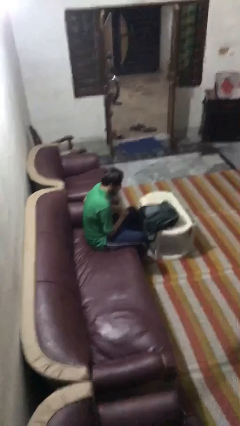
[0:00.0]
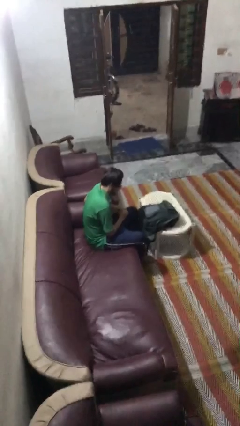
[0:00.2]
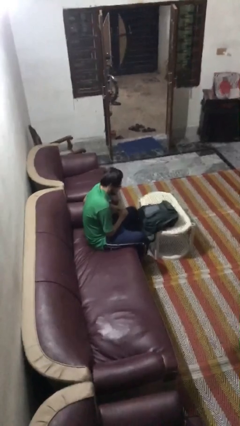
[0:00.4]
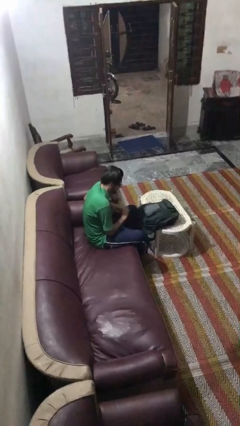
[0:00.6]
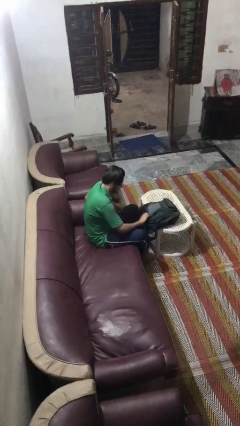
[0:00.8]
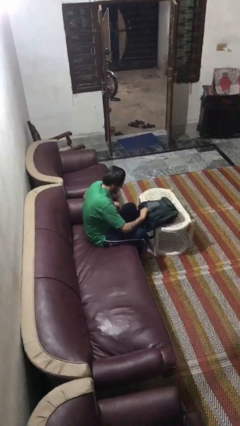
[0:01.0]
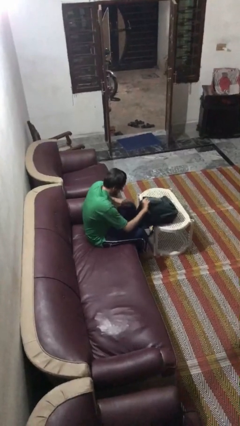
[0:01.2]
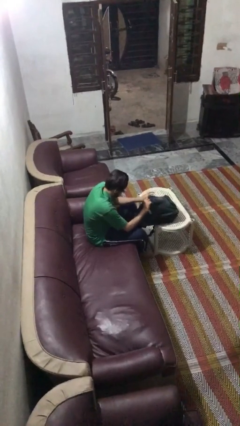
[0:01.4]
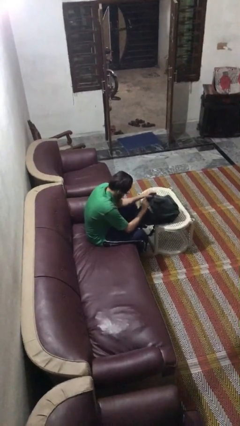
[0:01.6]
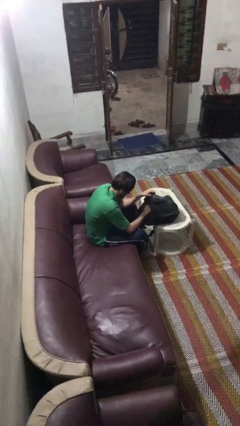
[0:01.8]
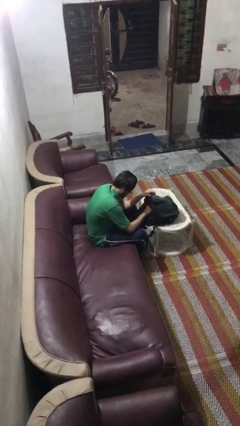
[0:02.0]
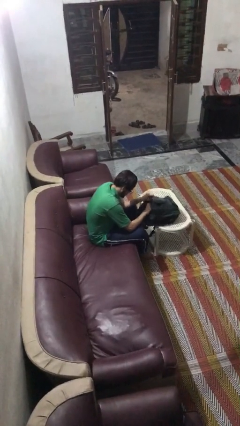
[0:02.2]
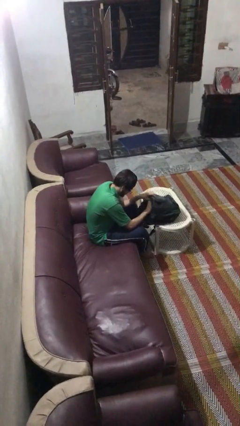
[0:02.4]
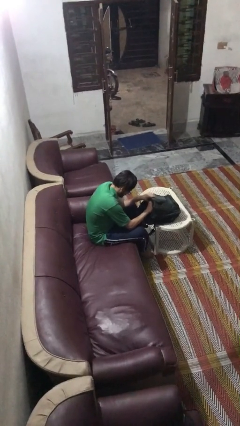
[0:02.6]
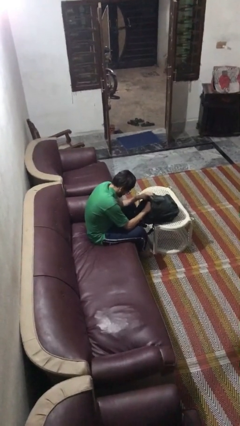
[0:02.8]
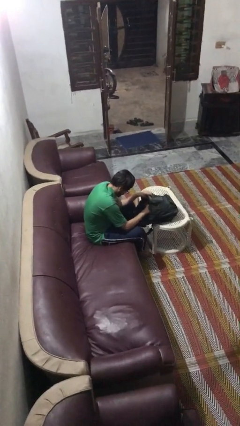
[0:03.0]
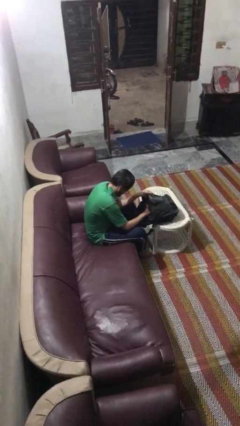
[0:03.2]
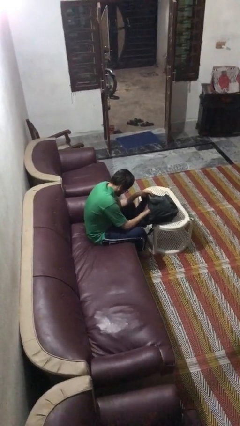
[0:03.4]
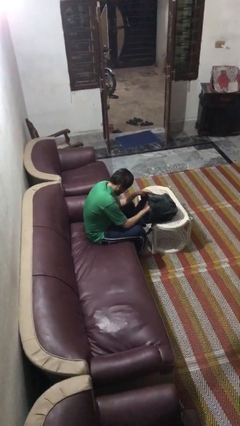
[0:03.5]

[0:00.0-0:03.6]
person searches in backpack

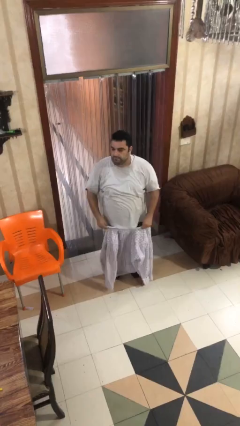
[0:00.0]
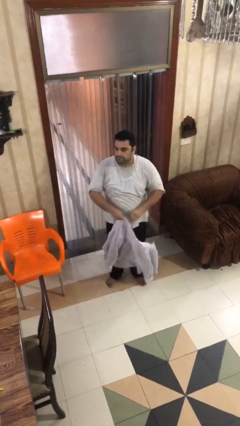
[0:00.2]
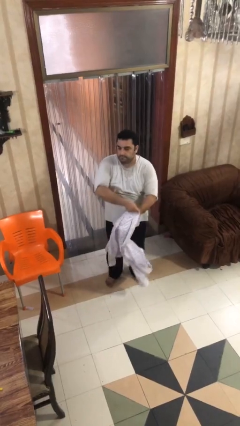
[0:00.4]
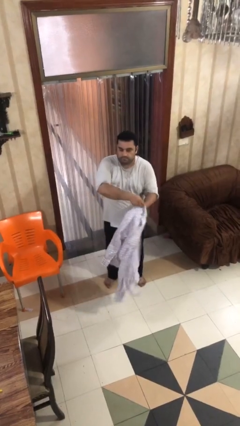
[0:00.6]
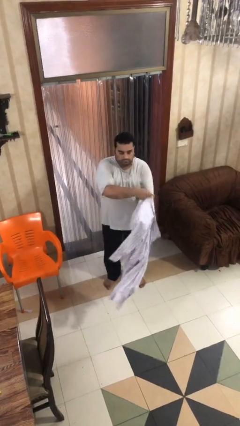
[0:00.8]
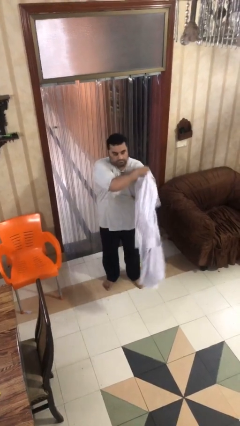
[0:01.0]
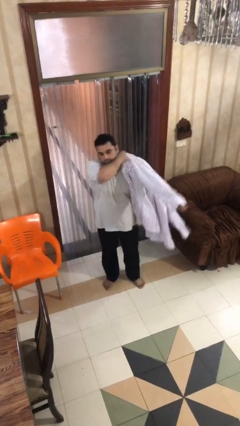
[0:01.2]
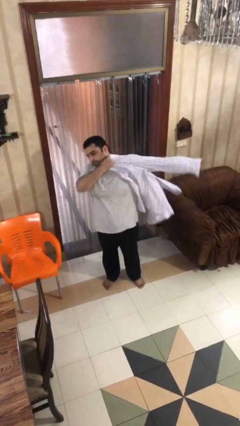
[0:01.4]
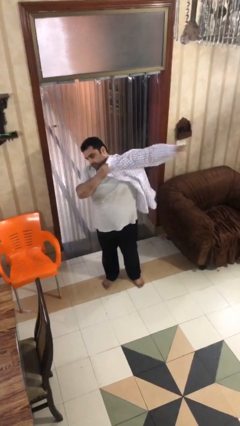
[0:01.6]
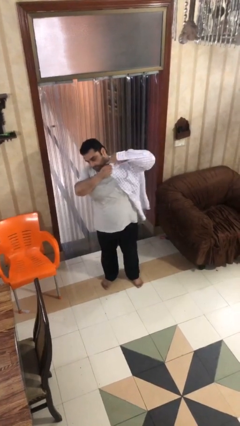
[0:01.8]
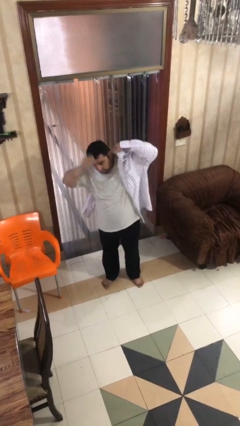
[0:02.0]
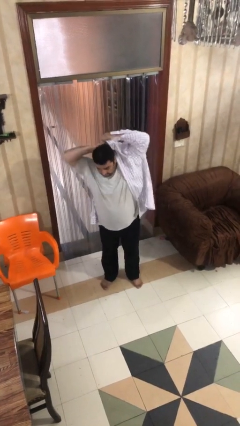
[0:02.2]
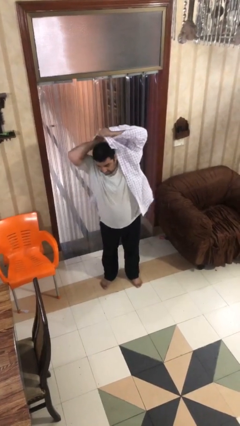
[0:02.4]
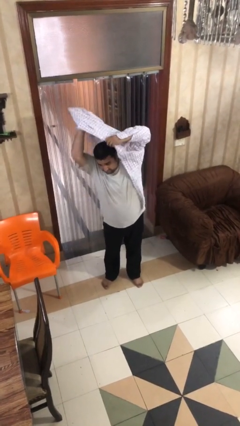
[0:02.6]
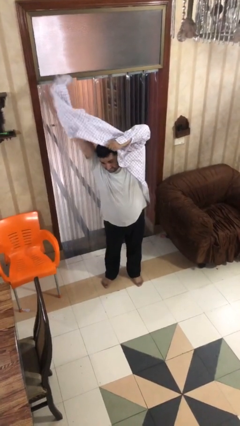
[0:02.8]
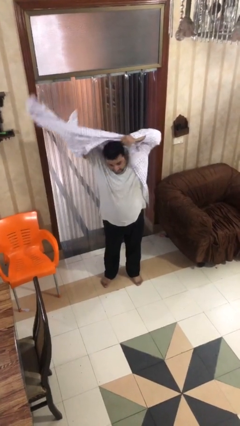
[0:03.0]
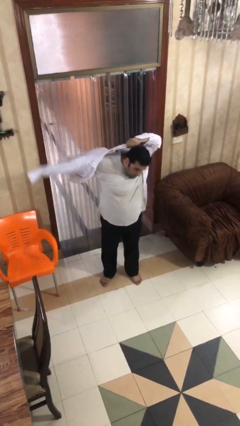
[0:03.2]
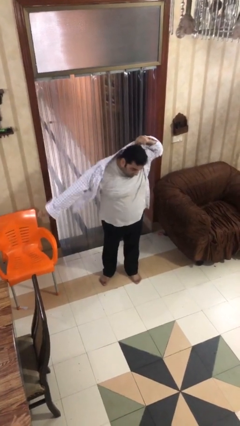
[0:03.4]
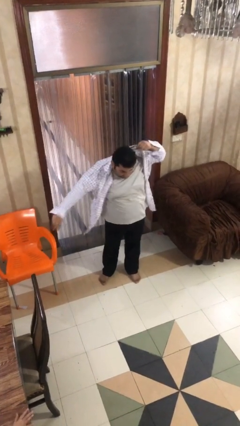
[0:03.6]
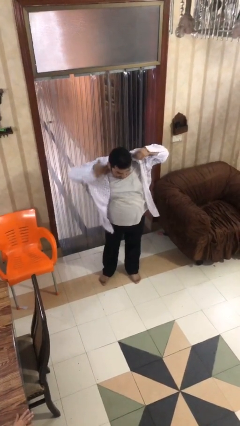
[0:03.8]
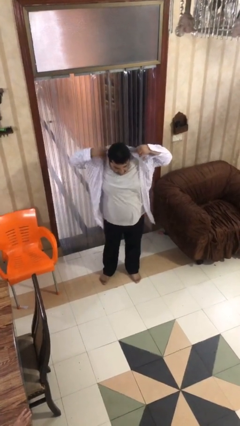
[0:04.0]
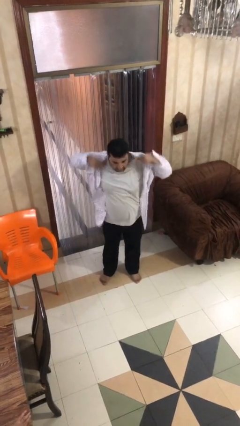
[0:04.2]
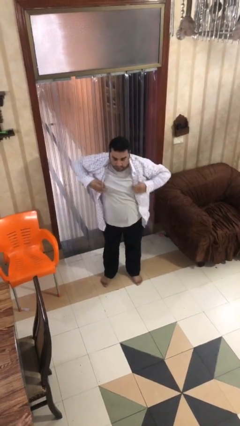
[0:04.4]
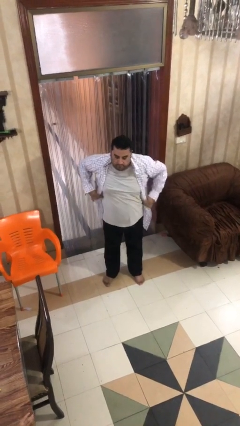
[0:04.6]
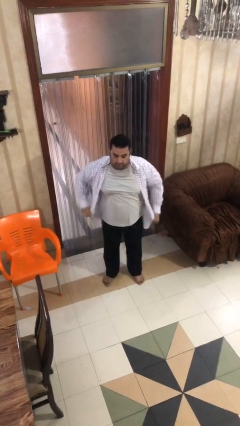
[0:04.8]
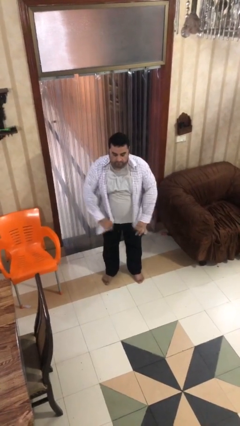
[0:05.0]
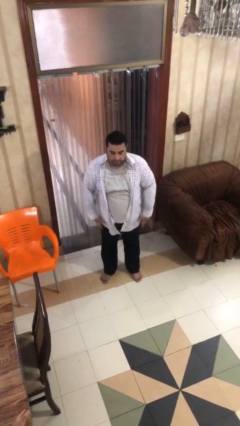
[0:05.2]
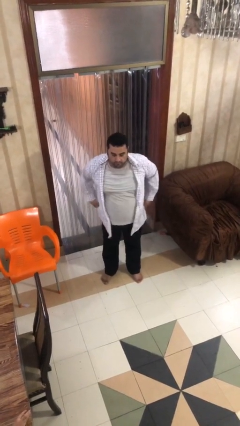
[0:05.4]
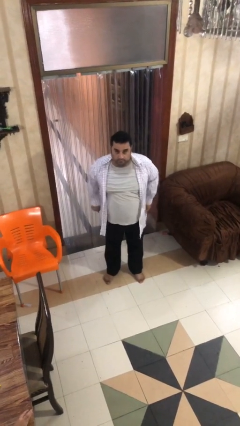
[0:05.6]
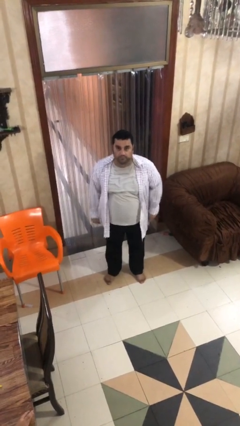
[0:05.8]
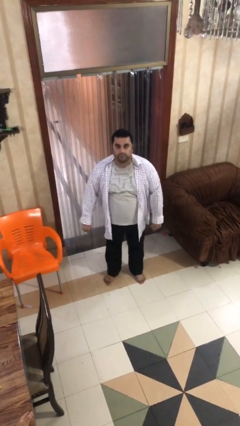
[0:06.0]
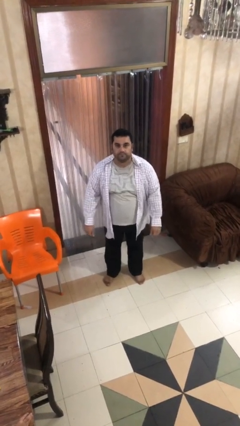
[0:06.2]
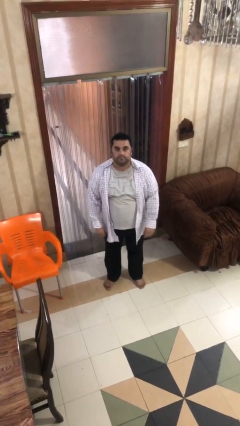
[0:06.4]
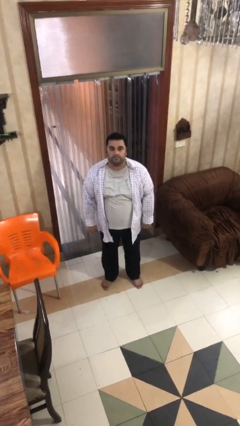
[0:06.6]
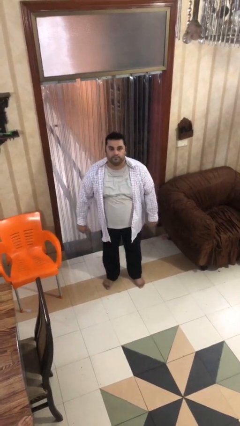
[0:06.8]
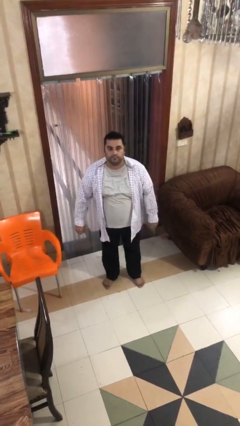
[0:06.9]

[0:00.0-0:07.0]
person puts on shirt

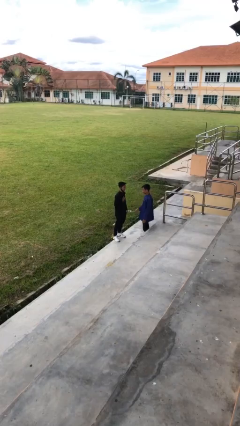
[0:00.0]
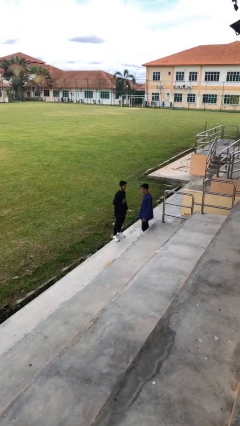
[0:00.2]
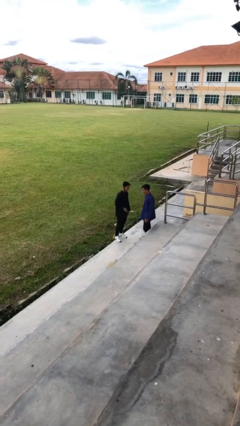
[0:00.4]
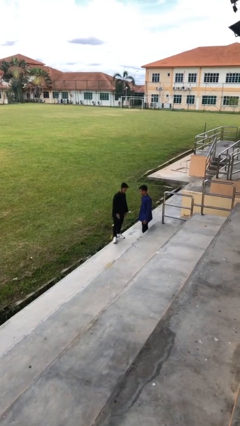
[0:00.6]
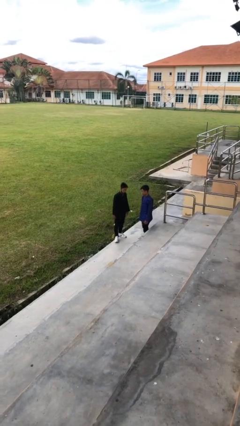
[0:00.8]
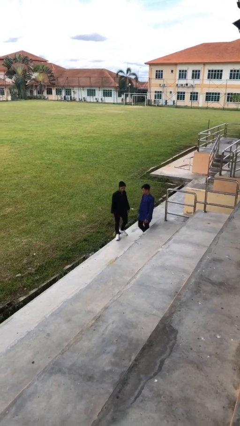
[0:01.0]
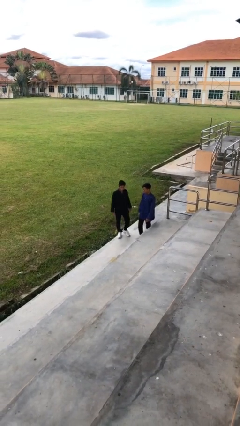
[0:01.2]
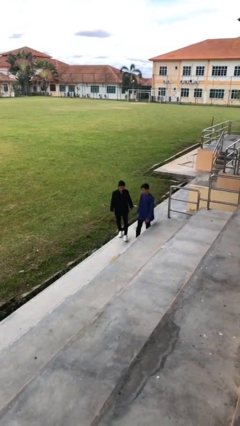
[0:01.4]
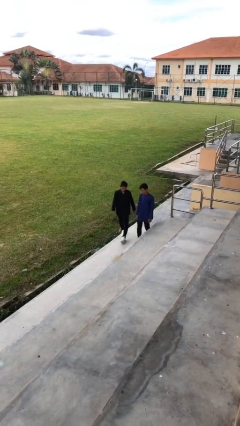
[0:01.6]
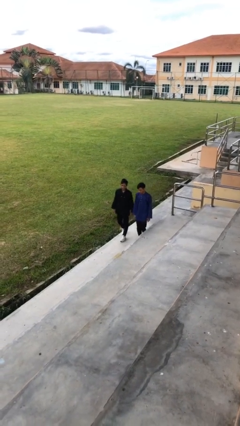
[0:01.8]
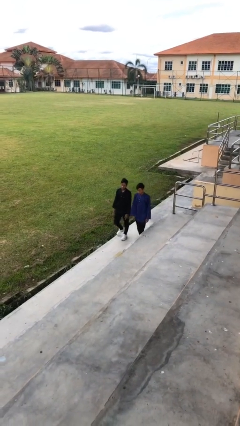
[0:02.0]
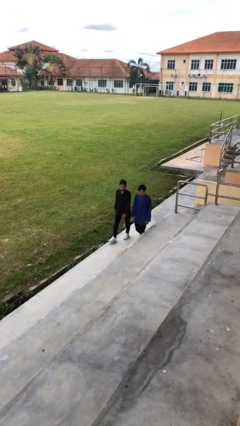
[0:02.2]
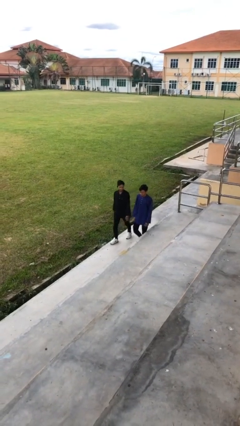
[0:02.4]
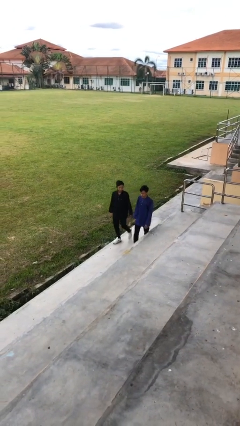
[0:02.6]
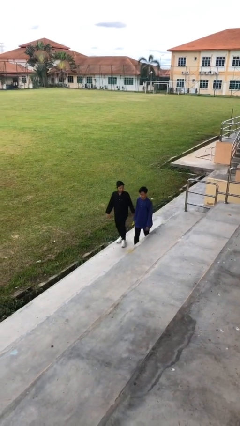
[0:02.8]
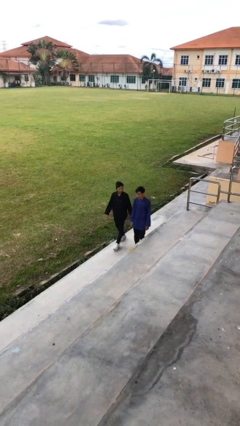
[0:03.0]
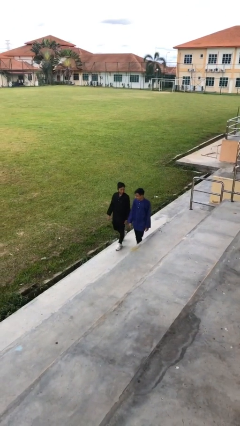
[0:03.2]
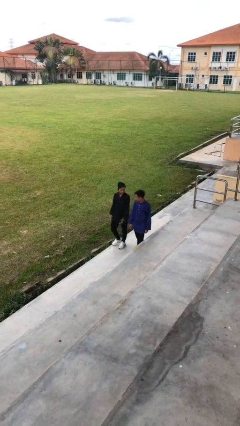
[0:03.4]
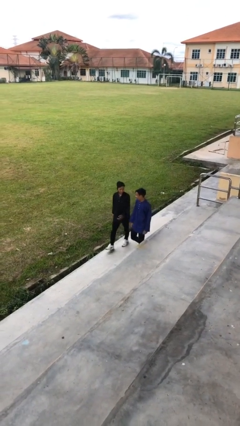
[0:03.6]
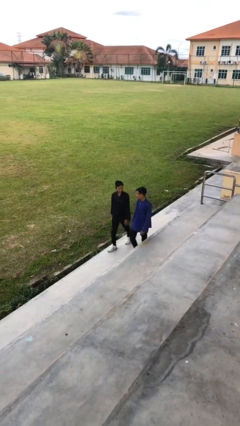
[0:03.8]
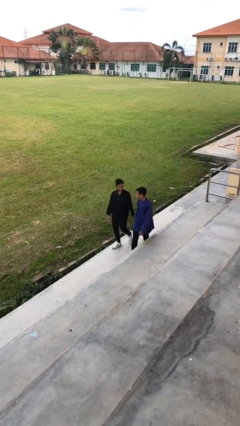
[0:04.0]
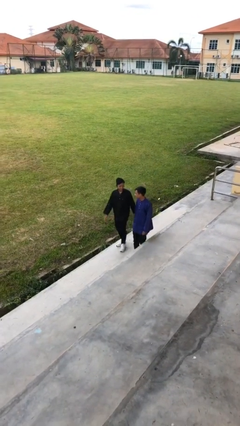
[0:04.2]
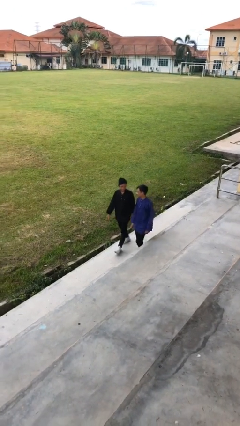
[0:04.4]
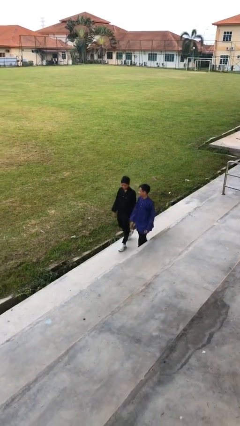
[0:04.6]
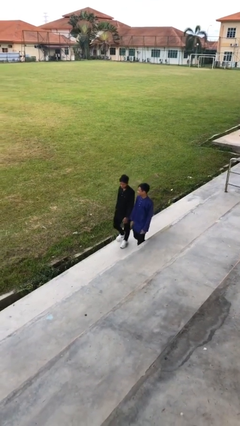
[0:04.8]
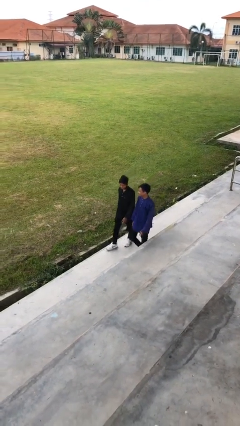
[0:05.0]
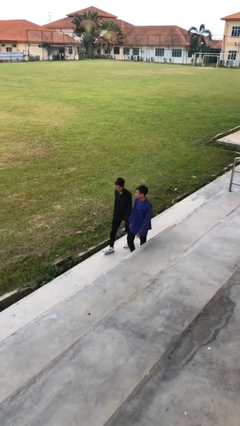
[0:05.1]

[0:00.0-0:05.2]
person talks to person

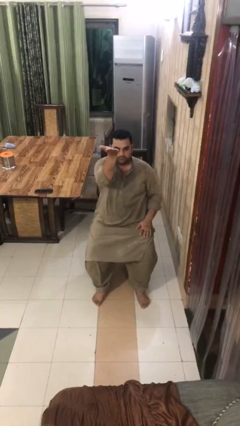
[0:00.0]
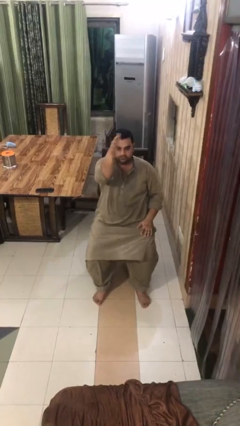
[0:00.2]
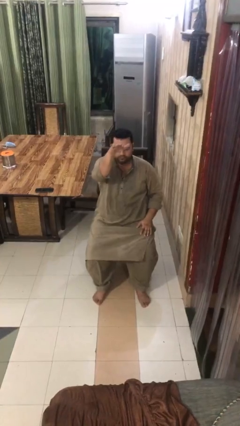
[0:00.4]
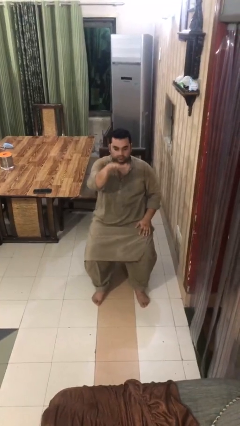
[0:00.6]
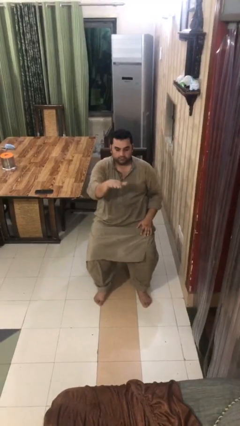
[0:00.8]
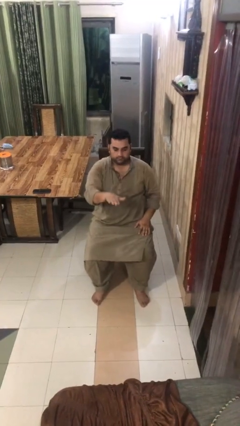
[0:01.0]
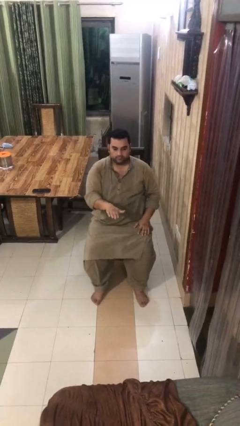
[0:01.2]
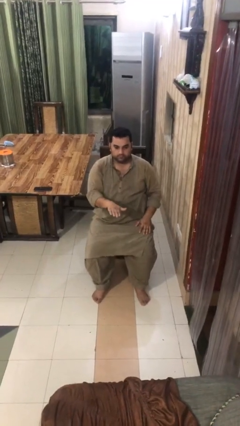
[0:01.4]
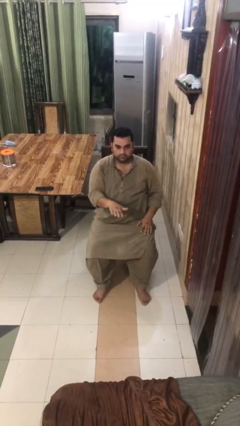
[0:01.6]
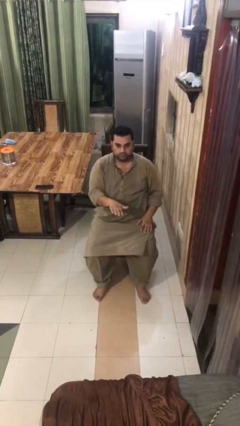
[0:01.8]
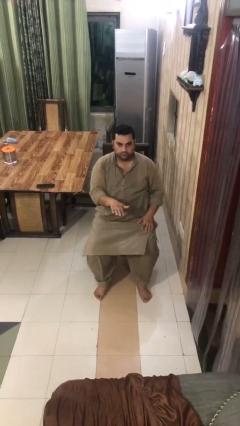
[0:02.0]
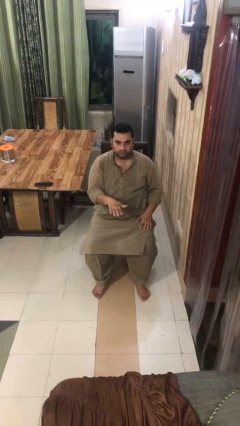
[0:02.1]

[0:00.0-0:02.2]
person gestures swipe down

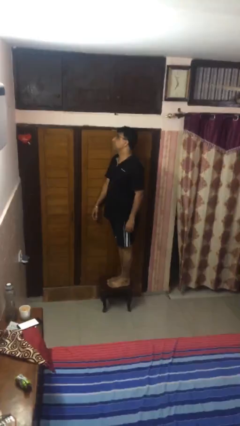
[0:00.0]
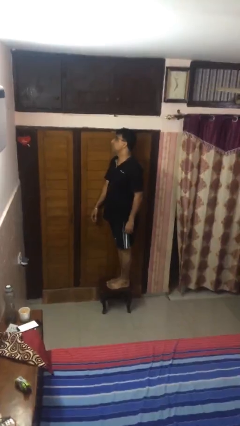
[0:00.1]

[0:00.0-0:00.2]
person climbs off table
